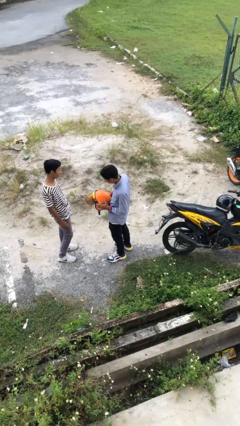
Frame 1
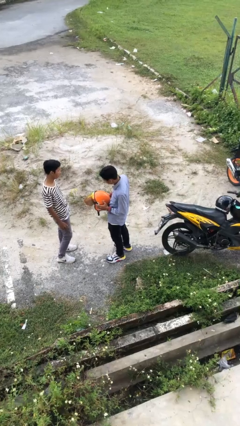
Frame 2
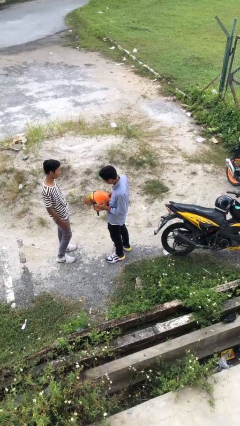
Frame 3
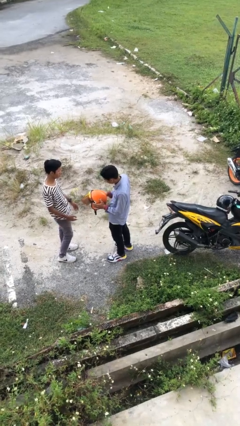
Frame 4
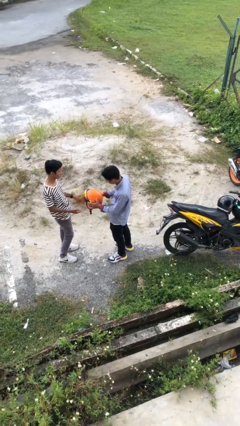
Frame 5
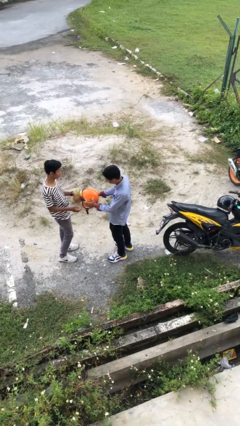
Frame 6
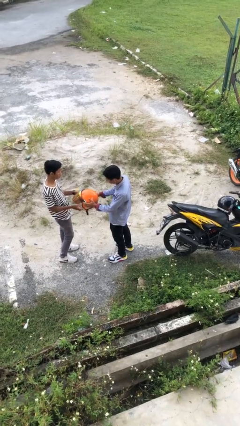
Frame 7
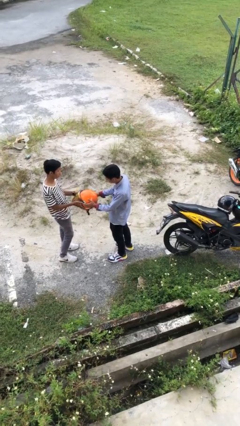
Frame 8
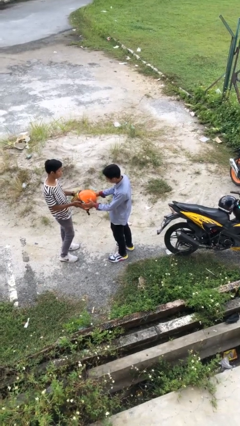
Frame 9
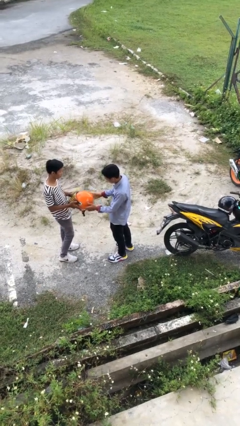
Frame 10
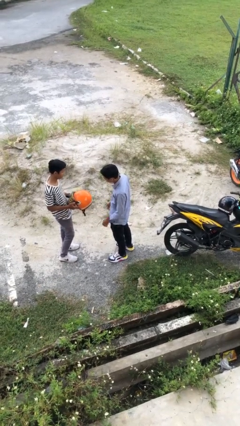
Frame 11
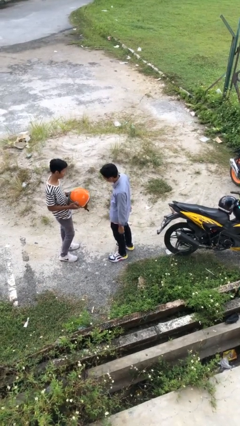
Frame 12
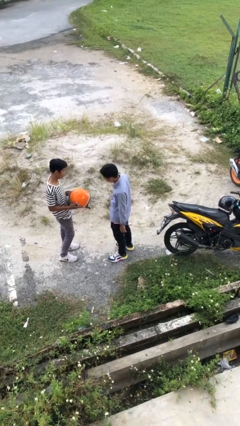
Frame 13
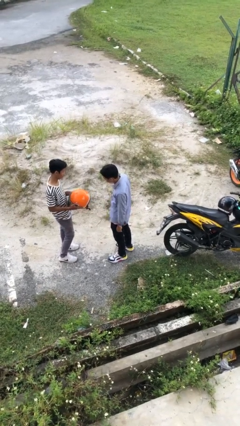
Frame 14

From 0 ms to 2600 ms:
person transfers object to person

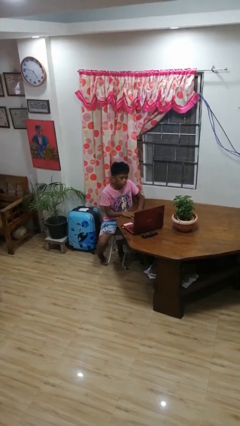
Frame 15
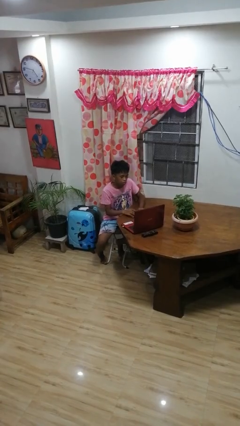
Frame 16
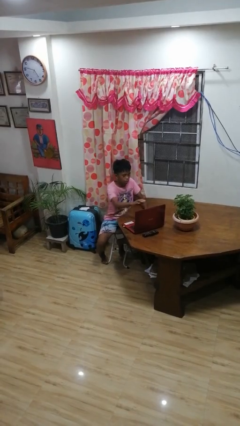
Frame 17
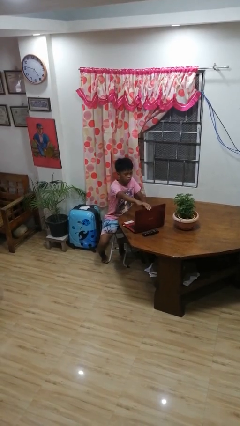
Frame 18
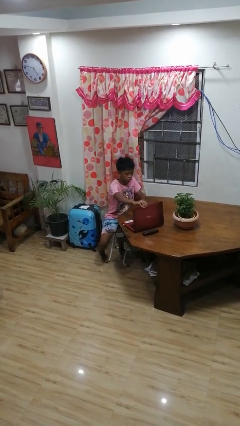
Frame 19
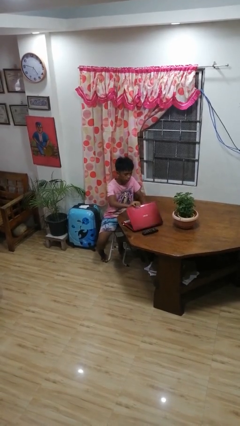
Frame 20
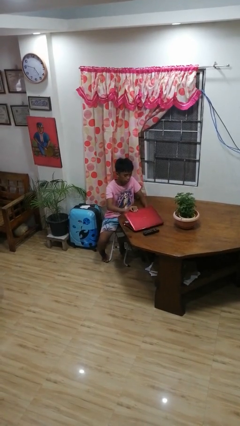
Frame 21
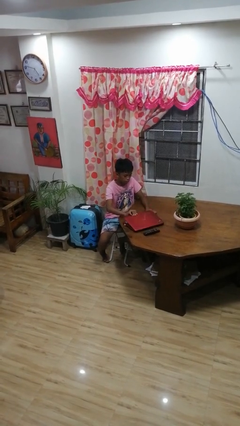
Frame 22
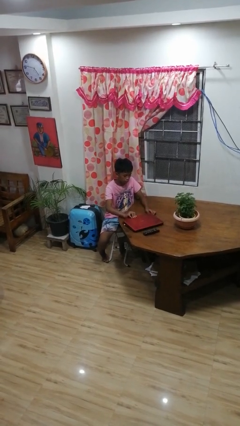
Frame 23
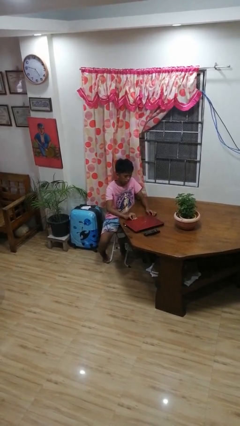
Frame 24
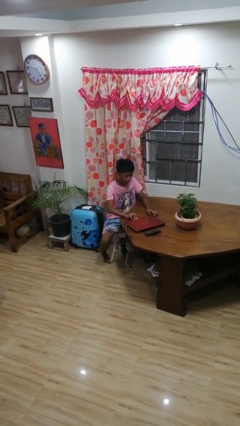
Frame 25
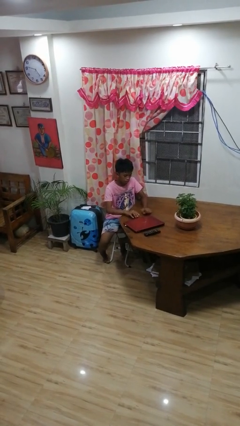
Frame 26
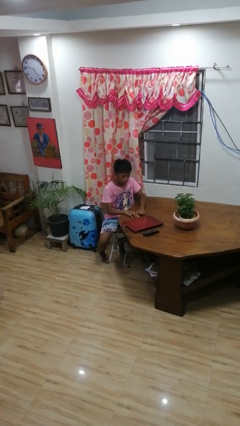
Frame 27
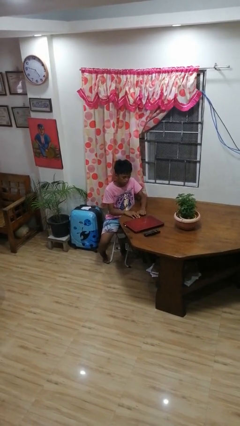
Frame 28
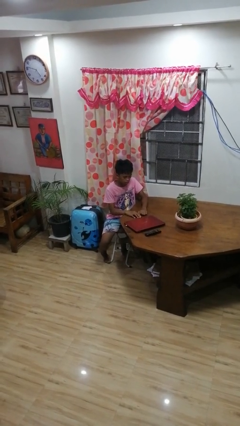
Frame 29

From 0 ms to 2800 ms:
person closes laptop

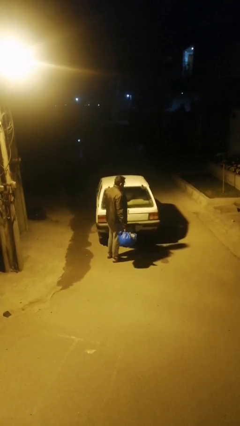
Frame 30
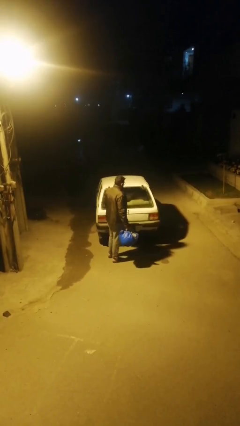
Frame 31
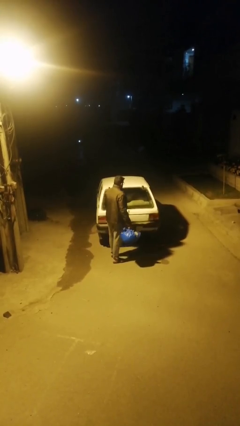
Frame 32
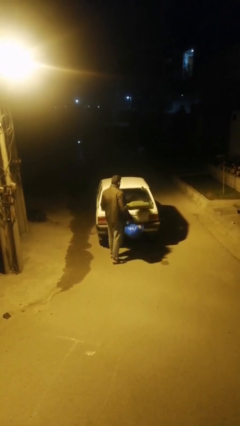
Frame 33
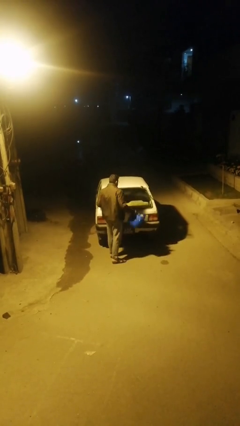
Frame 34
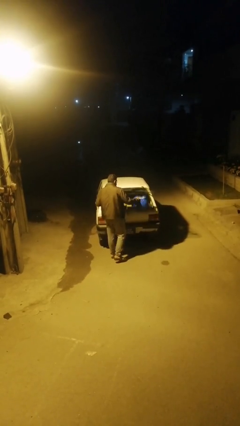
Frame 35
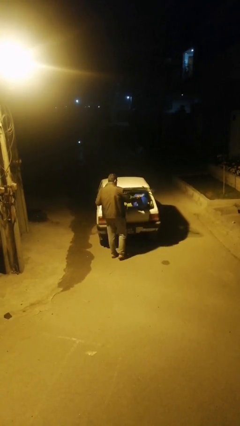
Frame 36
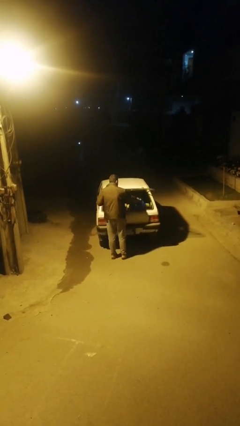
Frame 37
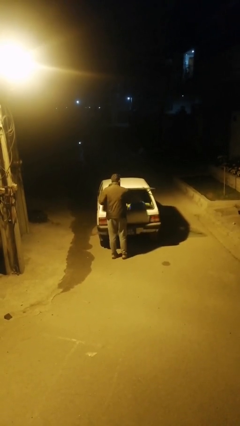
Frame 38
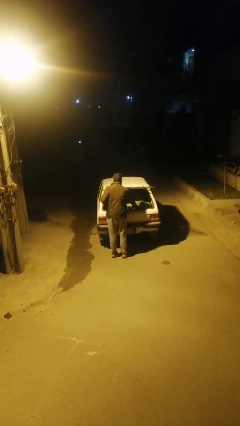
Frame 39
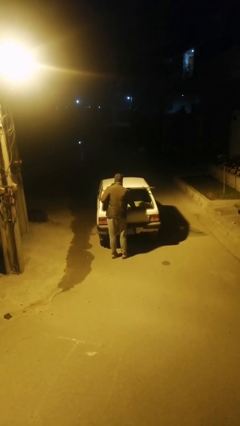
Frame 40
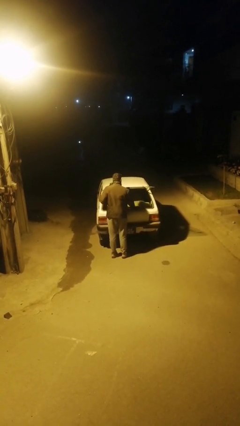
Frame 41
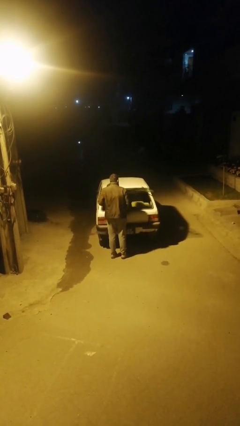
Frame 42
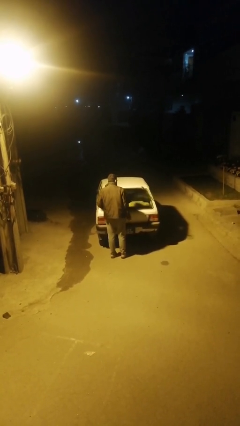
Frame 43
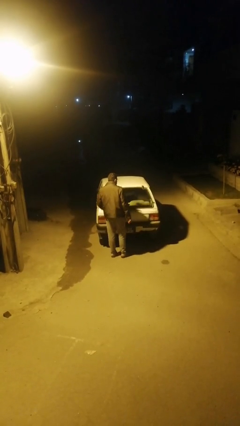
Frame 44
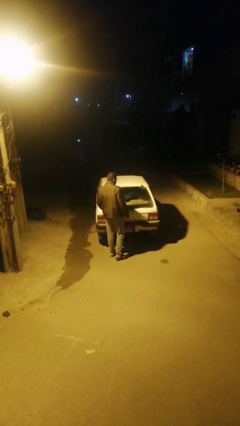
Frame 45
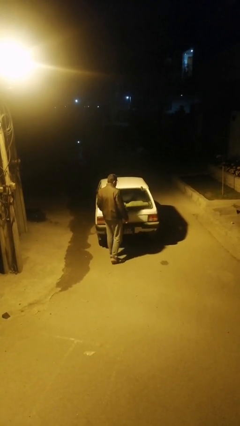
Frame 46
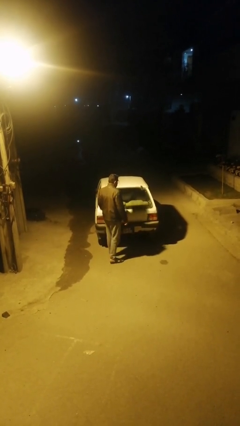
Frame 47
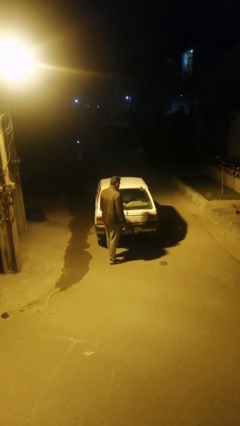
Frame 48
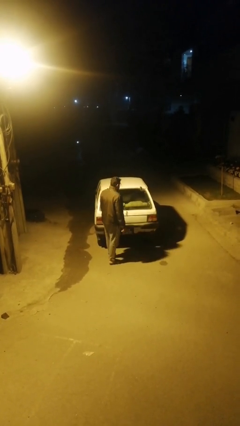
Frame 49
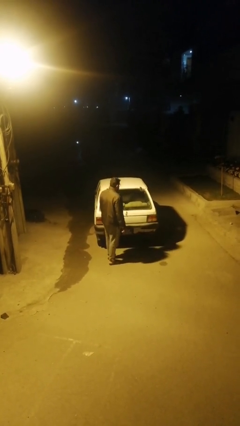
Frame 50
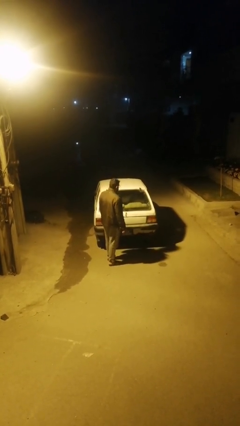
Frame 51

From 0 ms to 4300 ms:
person loads car

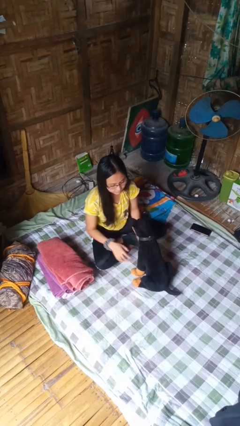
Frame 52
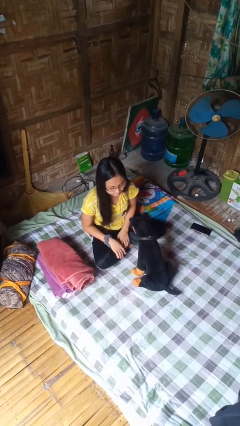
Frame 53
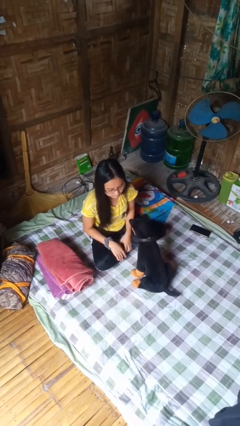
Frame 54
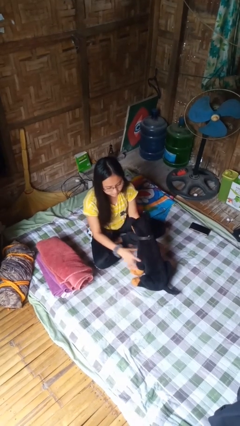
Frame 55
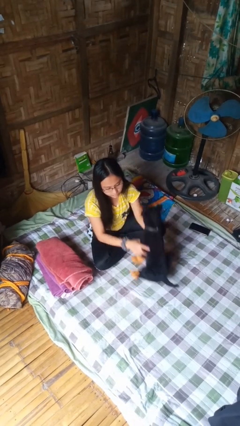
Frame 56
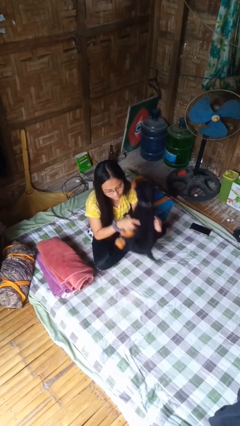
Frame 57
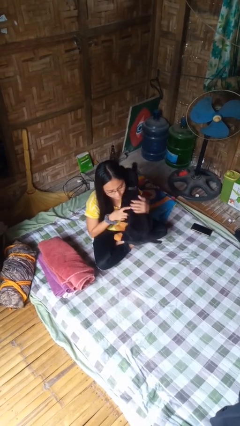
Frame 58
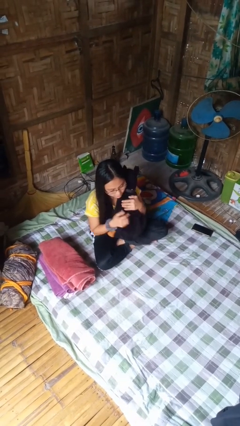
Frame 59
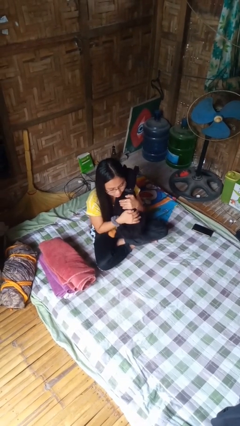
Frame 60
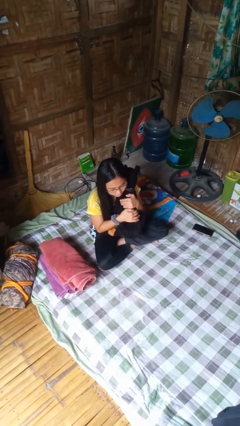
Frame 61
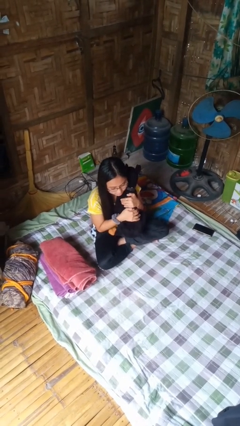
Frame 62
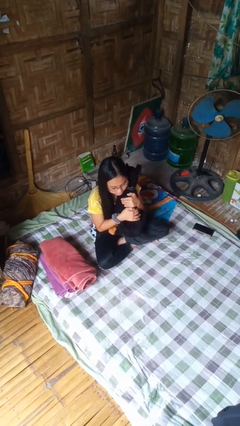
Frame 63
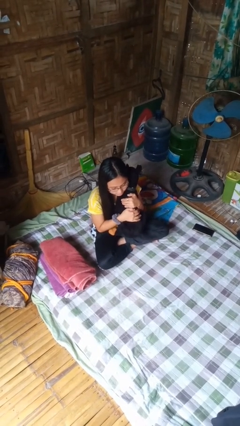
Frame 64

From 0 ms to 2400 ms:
person hugs stuffed animal

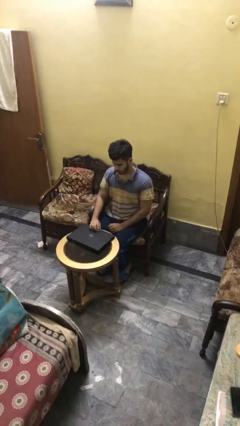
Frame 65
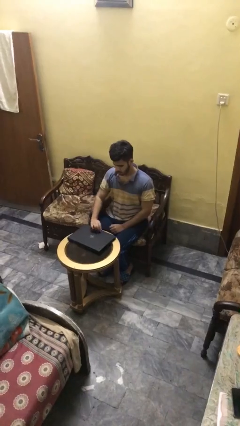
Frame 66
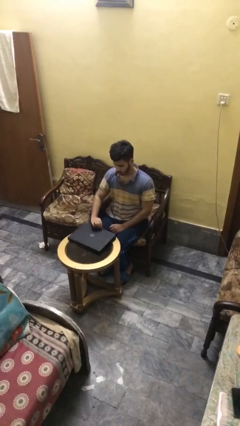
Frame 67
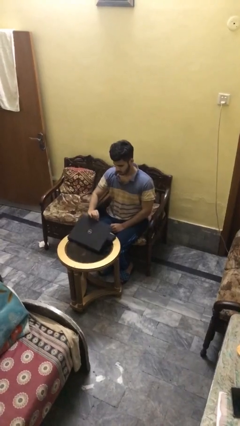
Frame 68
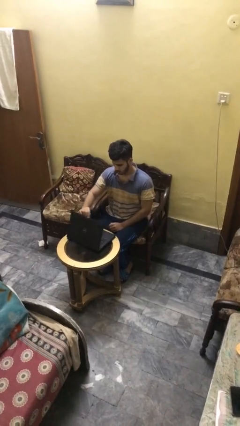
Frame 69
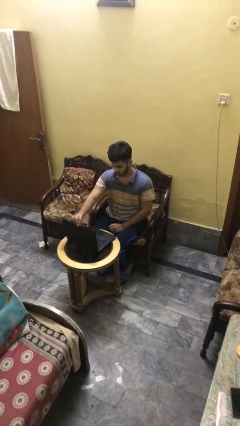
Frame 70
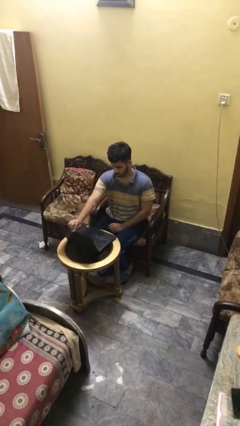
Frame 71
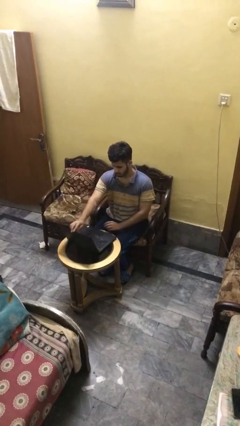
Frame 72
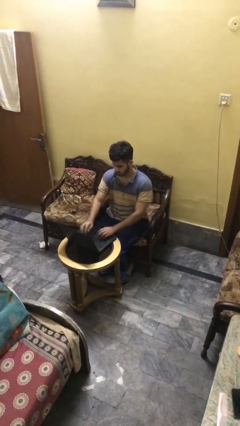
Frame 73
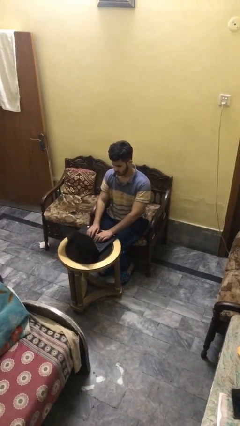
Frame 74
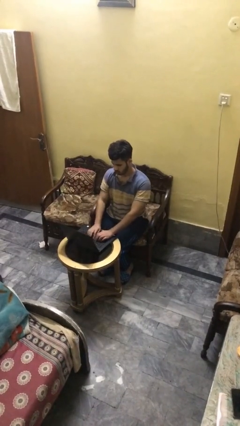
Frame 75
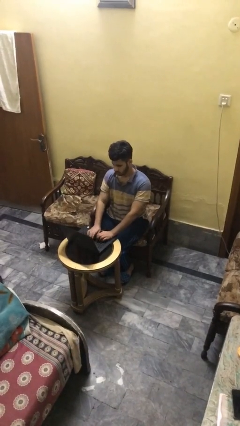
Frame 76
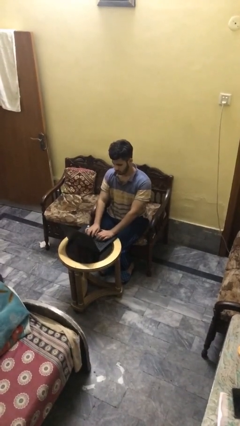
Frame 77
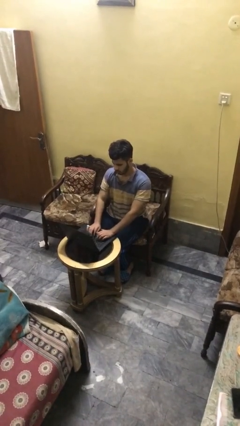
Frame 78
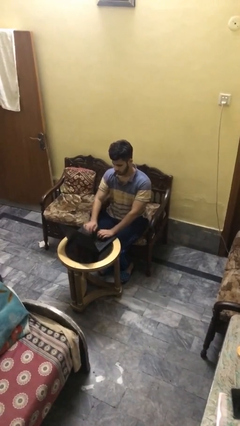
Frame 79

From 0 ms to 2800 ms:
person interacts with laptop

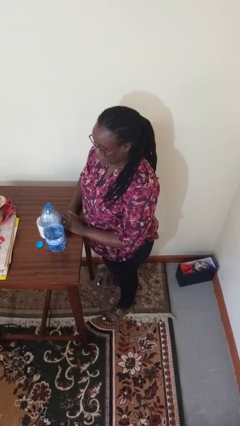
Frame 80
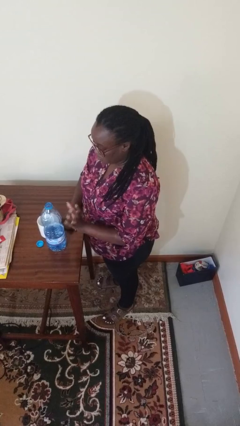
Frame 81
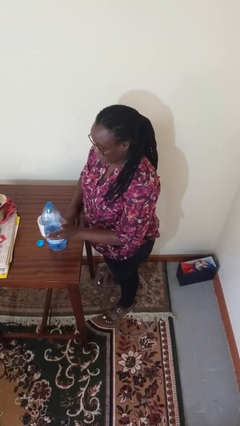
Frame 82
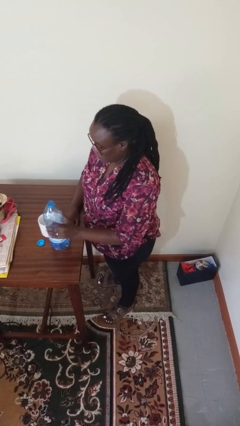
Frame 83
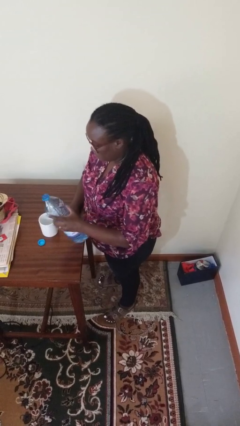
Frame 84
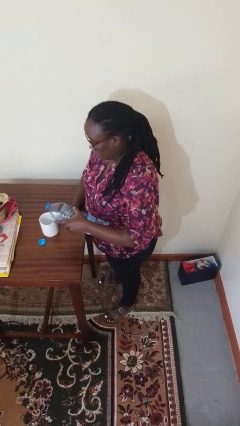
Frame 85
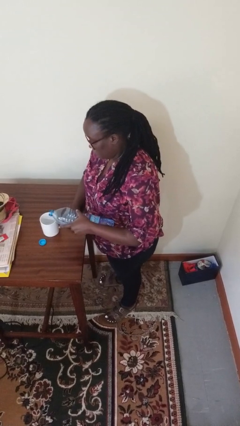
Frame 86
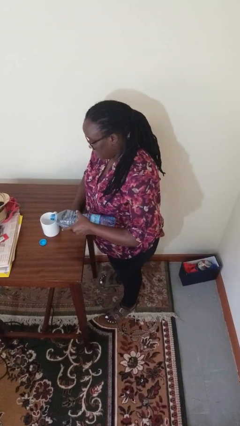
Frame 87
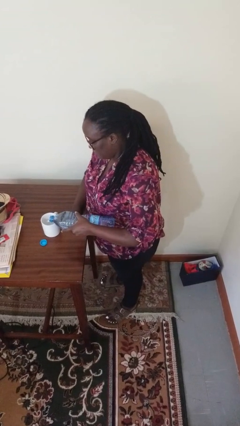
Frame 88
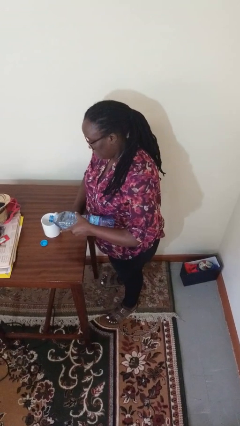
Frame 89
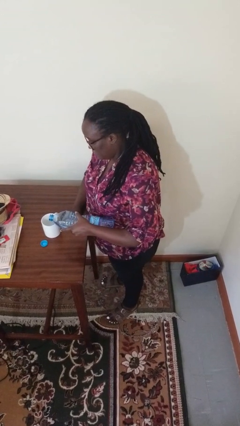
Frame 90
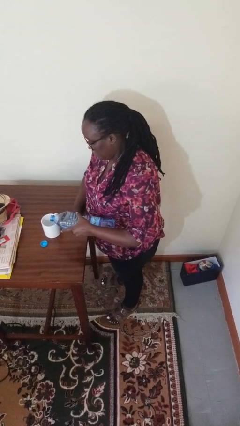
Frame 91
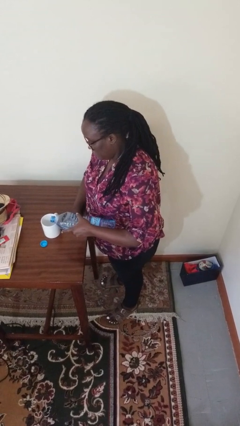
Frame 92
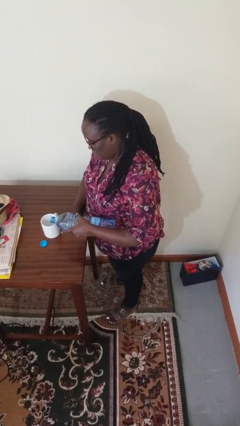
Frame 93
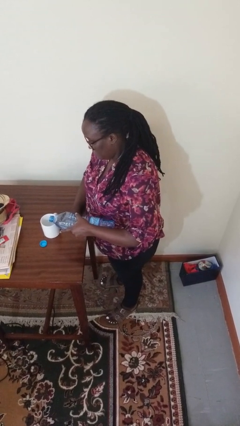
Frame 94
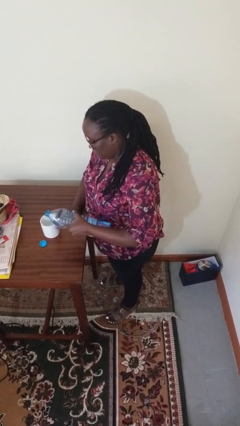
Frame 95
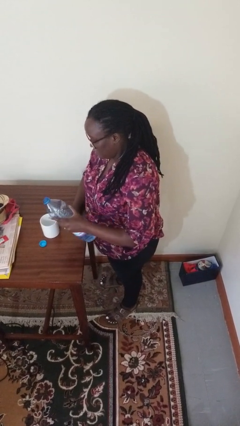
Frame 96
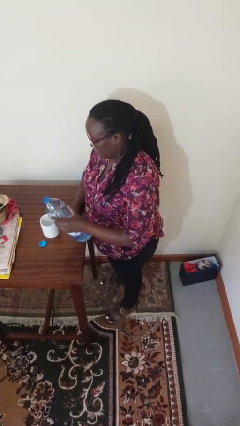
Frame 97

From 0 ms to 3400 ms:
person pours liquid into cup
